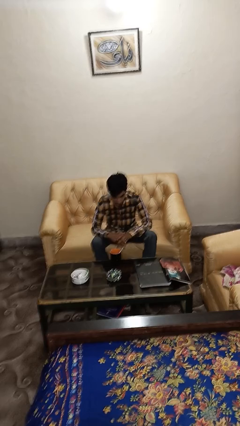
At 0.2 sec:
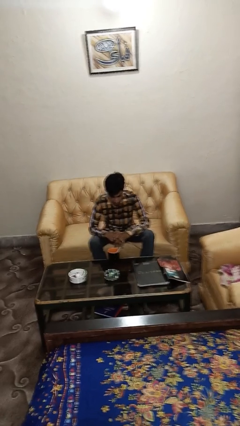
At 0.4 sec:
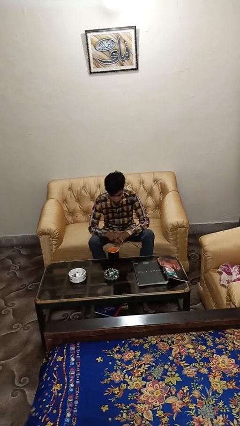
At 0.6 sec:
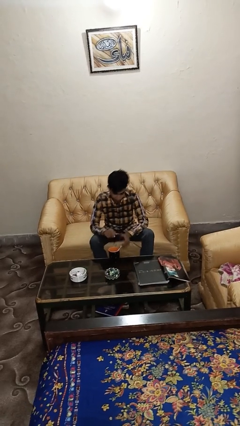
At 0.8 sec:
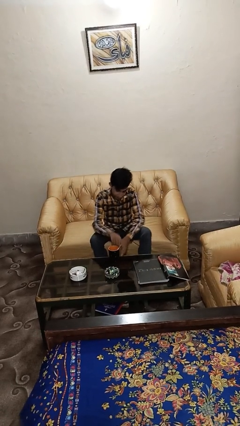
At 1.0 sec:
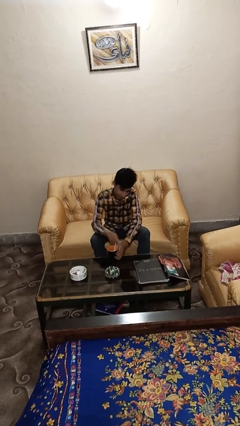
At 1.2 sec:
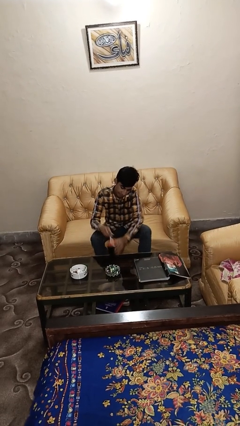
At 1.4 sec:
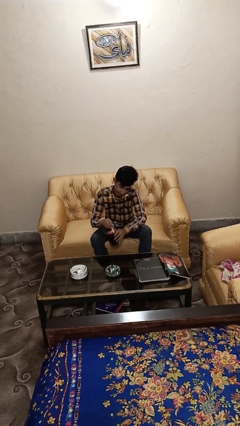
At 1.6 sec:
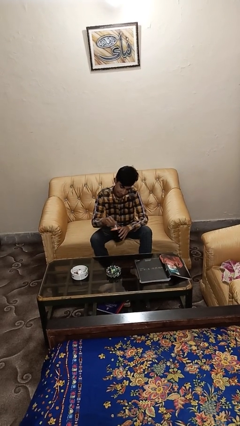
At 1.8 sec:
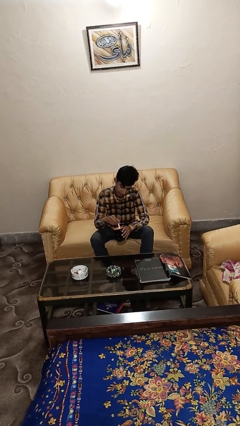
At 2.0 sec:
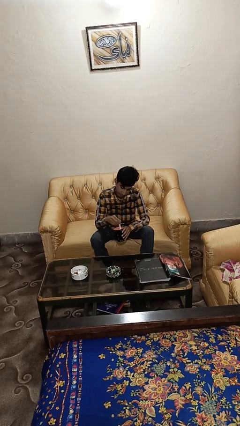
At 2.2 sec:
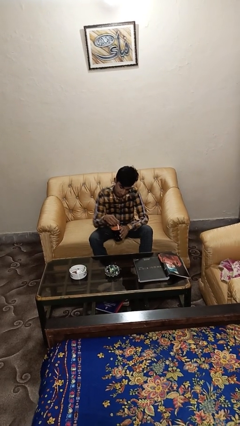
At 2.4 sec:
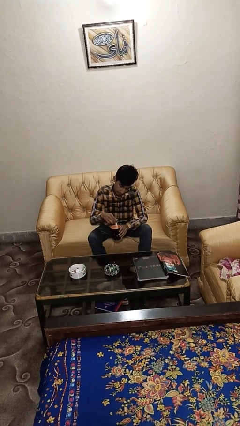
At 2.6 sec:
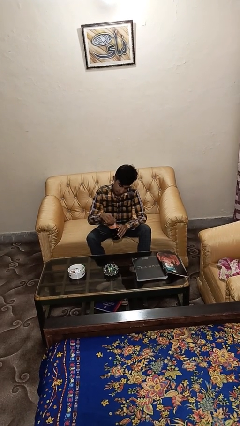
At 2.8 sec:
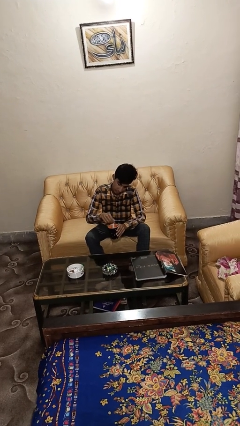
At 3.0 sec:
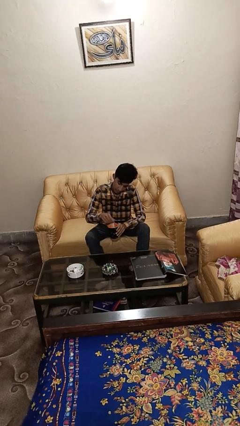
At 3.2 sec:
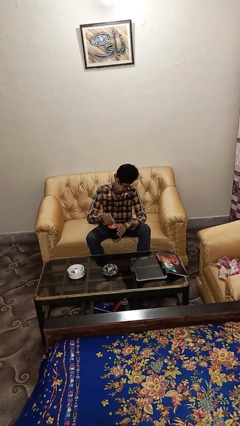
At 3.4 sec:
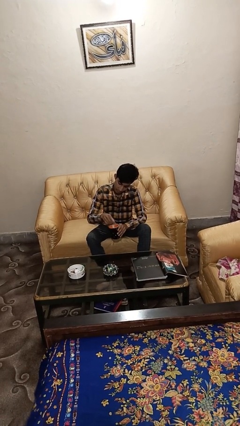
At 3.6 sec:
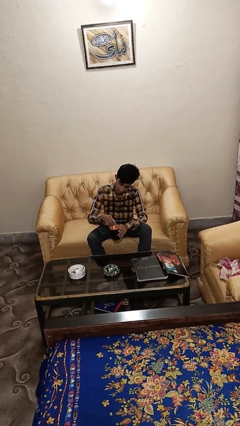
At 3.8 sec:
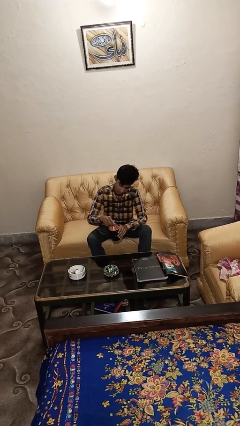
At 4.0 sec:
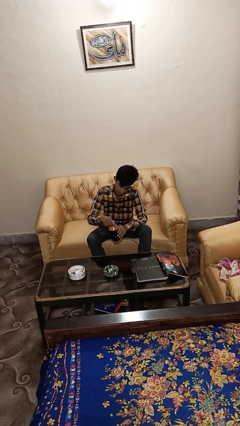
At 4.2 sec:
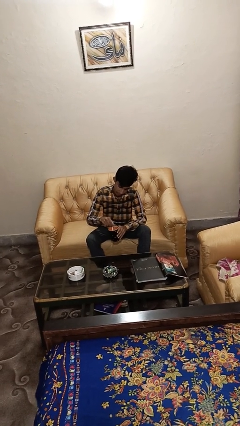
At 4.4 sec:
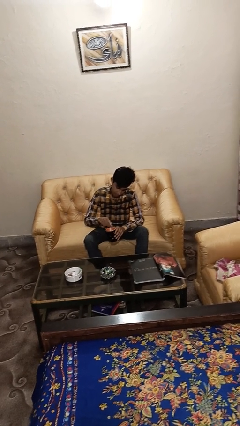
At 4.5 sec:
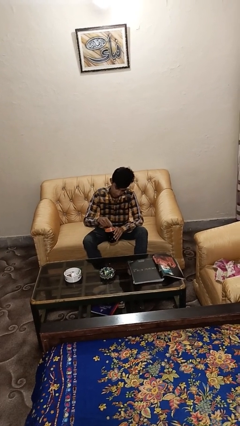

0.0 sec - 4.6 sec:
person stirs mug

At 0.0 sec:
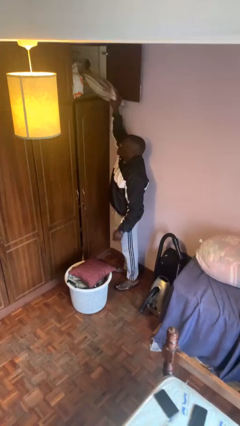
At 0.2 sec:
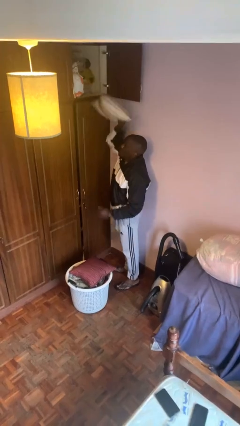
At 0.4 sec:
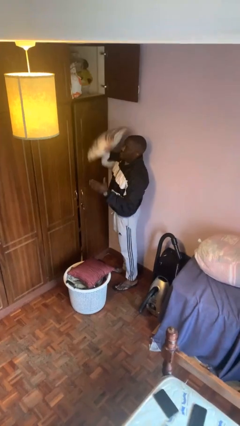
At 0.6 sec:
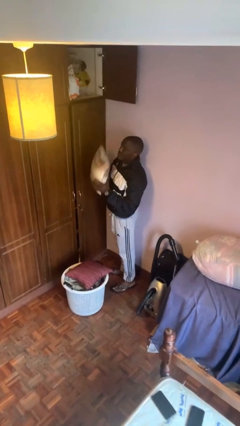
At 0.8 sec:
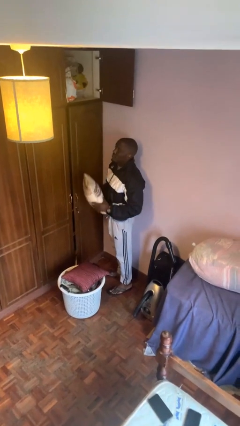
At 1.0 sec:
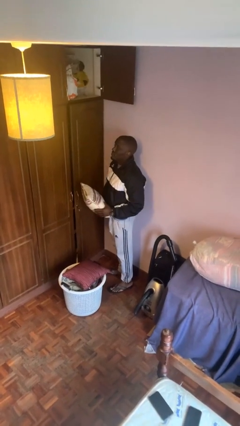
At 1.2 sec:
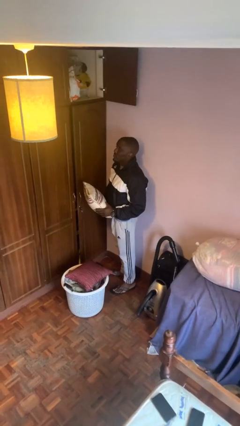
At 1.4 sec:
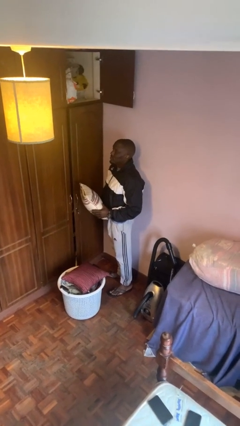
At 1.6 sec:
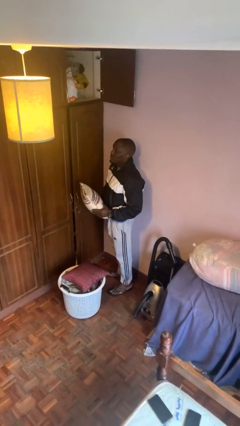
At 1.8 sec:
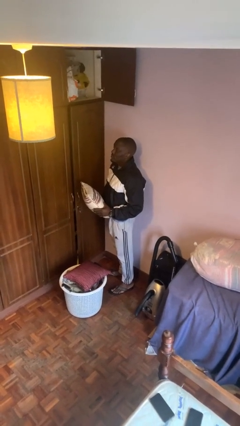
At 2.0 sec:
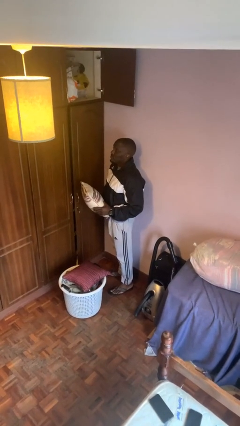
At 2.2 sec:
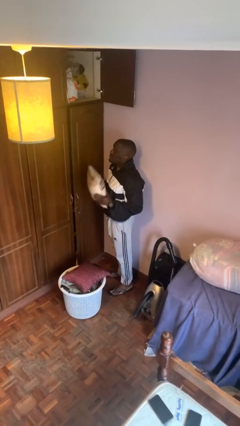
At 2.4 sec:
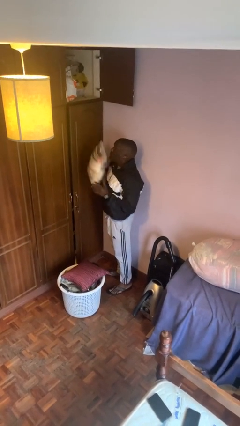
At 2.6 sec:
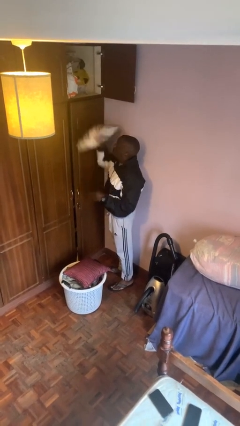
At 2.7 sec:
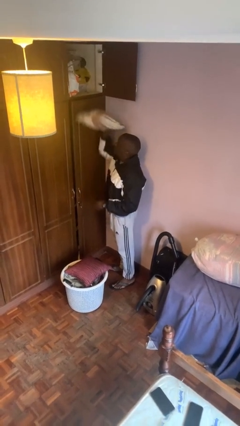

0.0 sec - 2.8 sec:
person picks up object from shelf

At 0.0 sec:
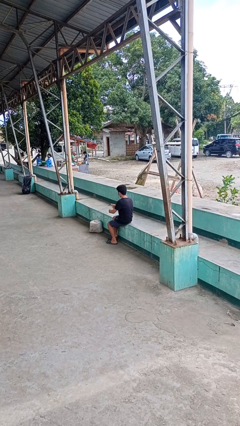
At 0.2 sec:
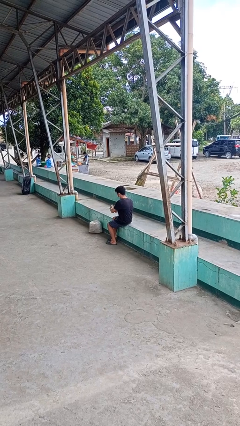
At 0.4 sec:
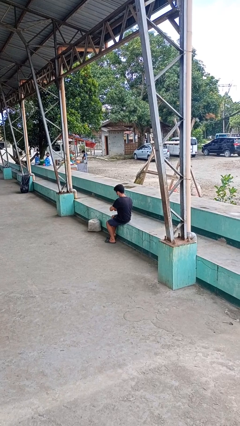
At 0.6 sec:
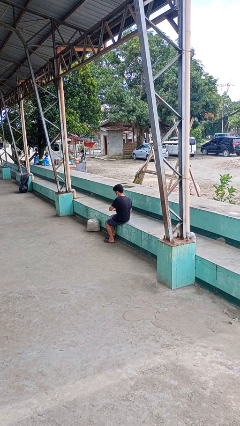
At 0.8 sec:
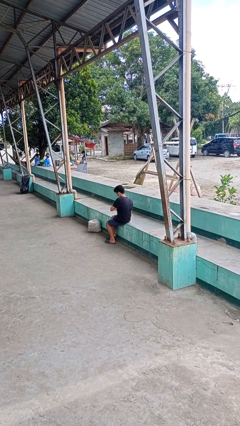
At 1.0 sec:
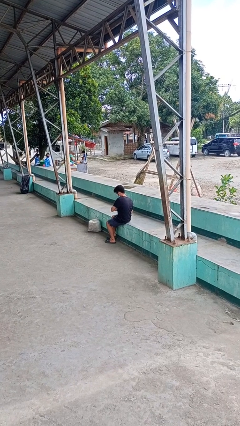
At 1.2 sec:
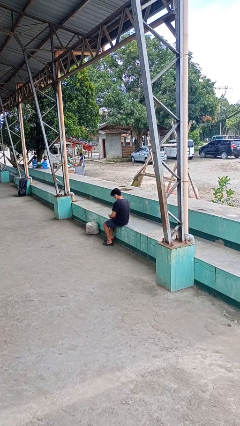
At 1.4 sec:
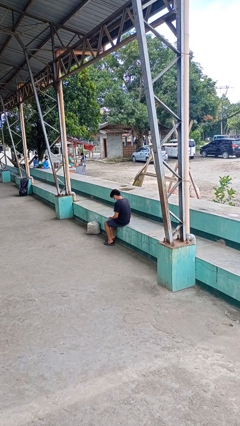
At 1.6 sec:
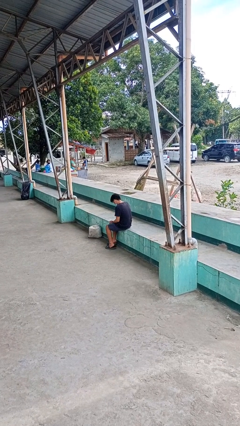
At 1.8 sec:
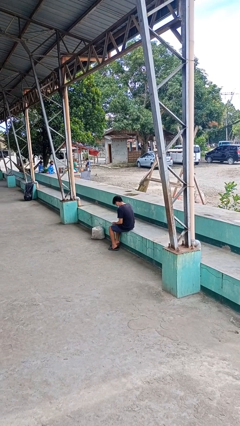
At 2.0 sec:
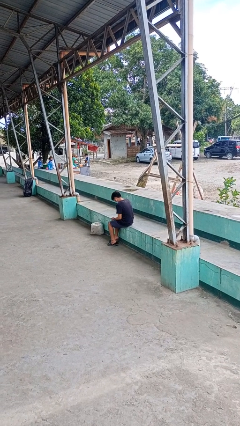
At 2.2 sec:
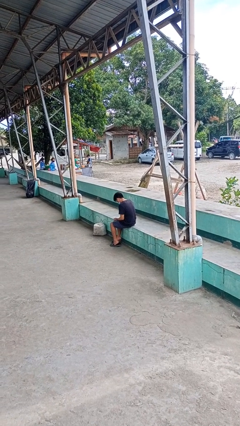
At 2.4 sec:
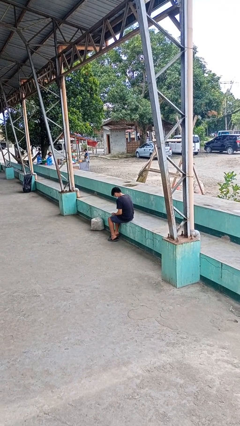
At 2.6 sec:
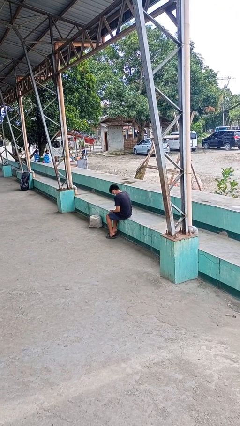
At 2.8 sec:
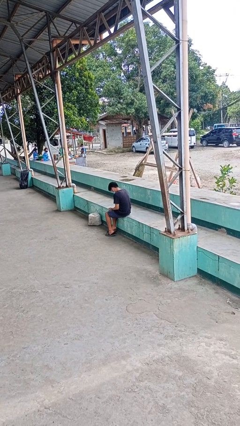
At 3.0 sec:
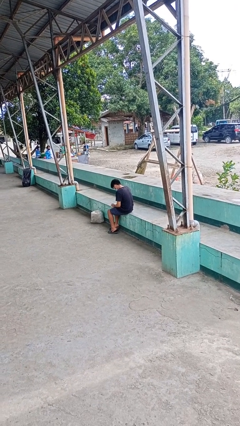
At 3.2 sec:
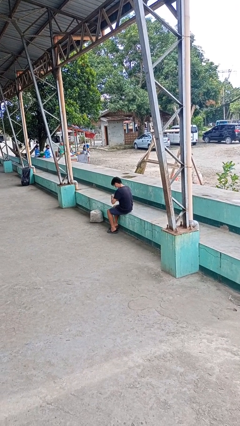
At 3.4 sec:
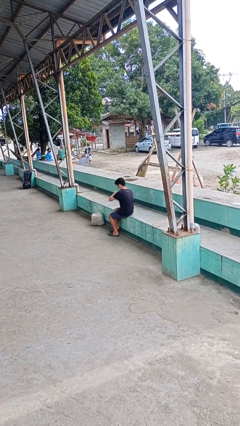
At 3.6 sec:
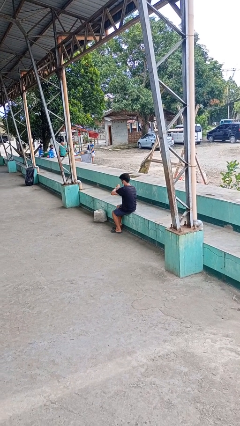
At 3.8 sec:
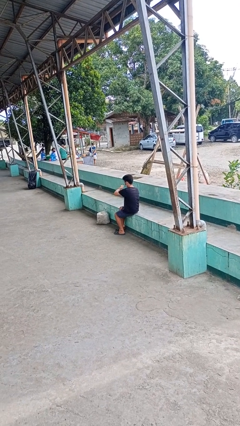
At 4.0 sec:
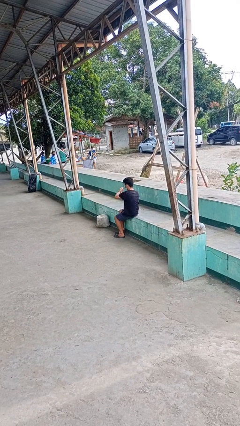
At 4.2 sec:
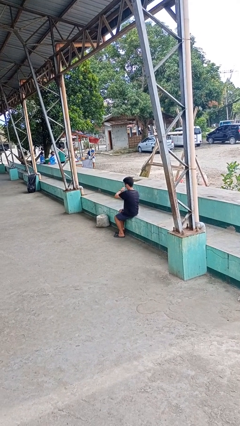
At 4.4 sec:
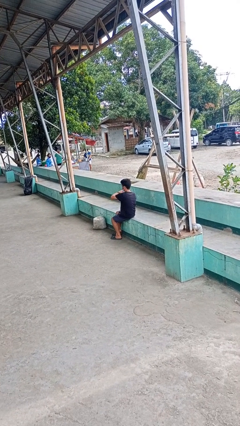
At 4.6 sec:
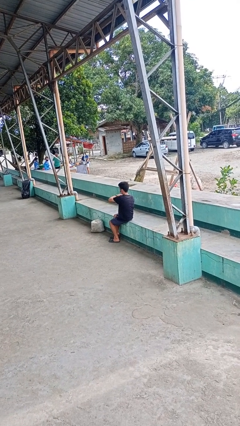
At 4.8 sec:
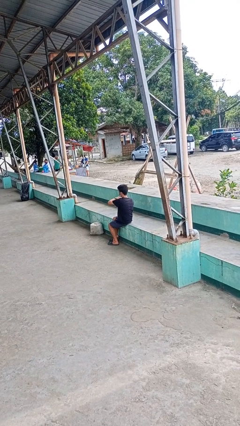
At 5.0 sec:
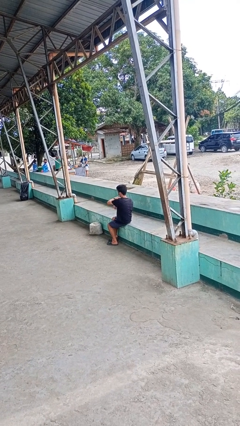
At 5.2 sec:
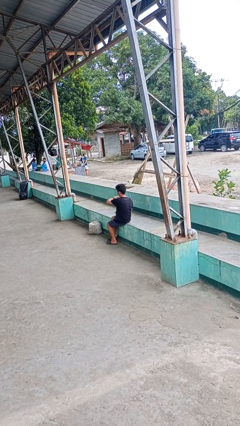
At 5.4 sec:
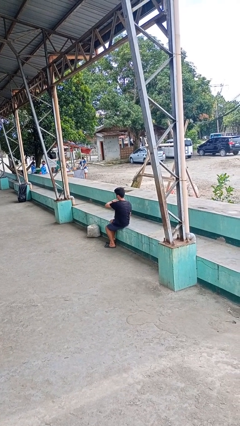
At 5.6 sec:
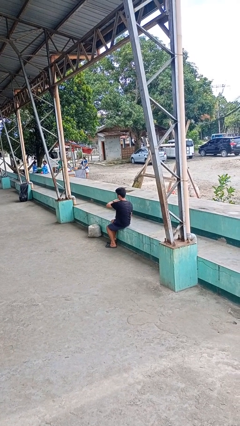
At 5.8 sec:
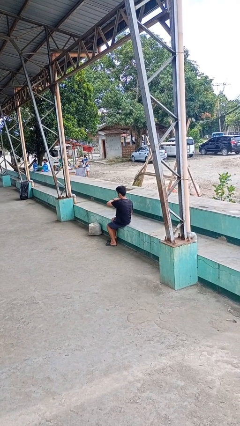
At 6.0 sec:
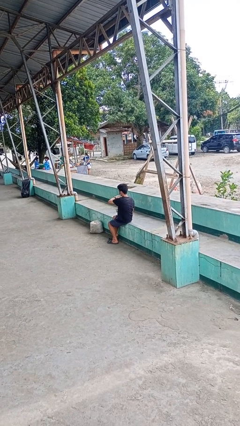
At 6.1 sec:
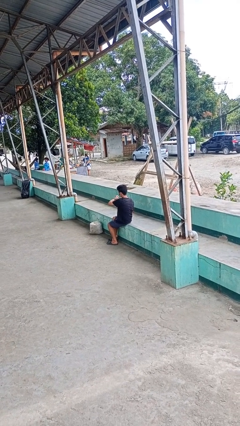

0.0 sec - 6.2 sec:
person puts on wristwatch

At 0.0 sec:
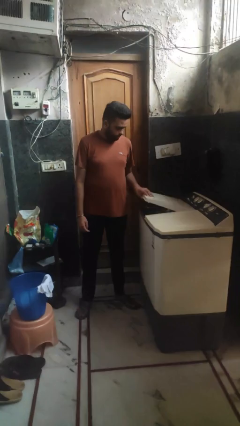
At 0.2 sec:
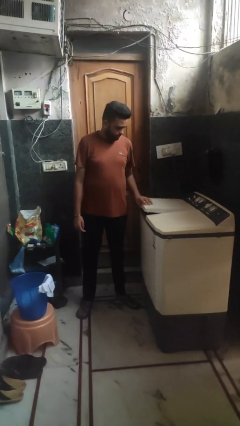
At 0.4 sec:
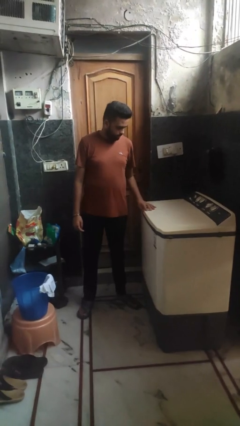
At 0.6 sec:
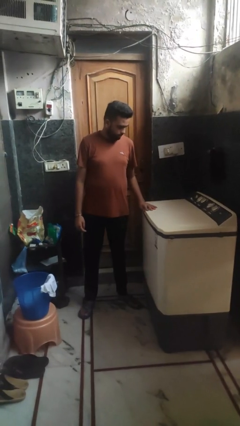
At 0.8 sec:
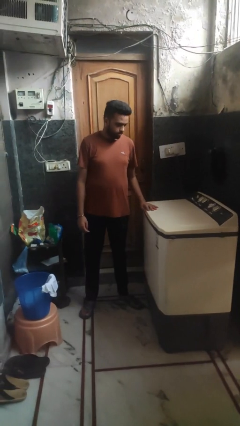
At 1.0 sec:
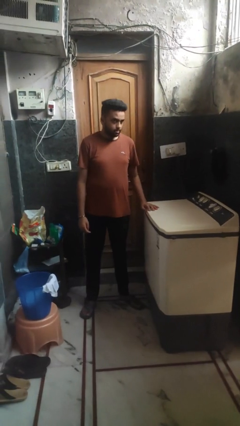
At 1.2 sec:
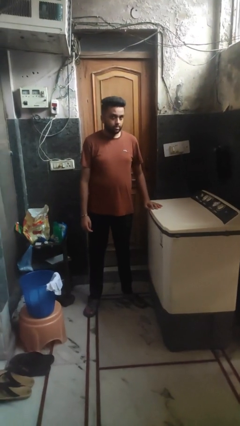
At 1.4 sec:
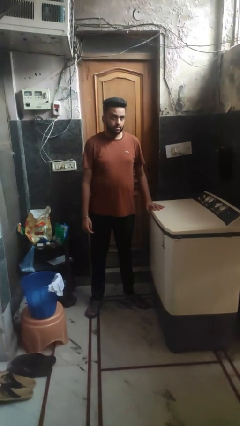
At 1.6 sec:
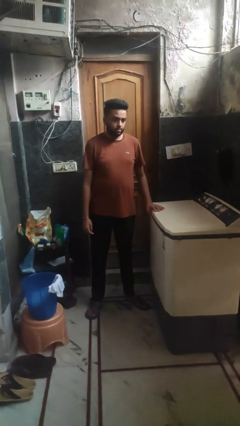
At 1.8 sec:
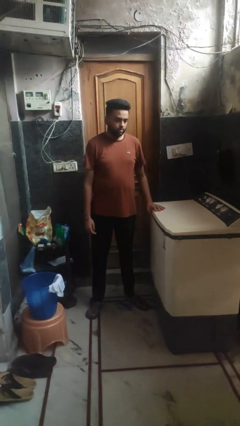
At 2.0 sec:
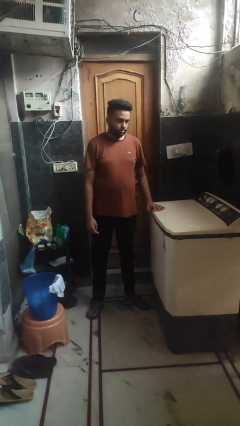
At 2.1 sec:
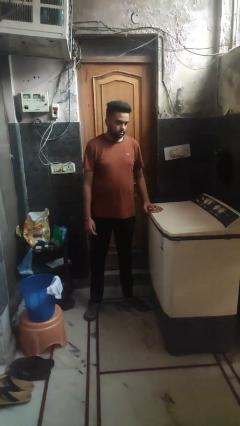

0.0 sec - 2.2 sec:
person closes clothes washer

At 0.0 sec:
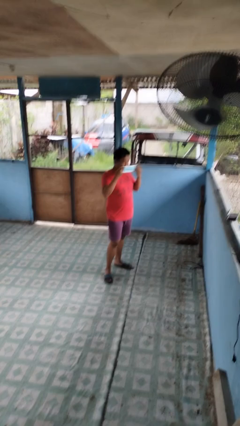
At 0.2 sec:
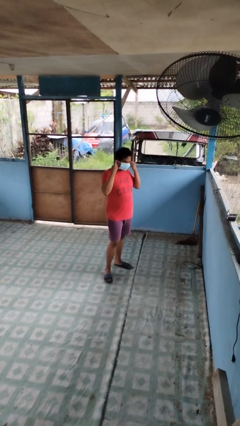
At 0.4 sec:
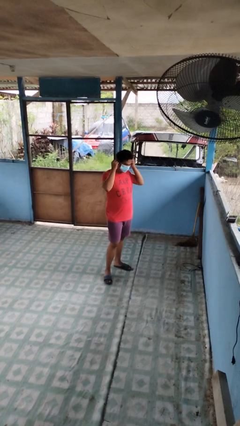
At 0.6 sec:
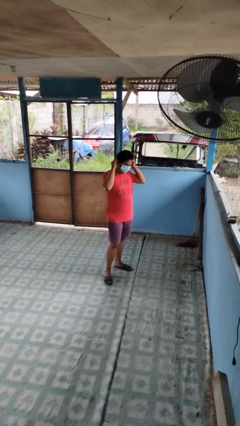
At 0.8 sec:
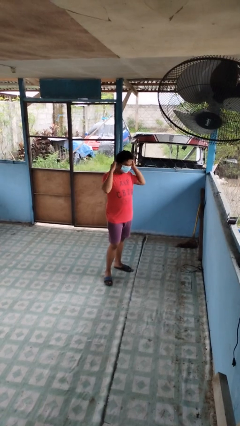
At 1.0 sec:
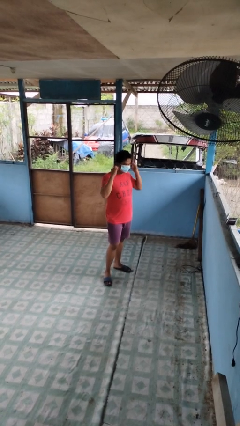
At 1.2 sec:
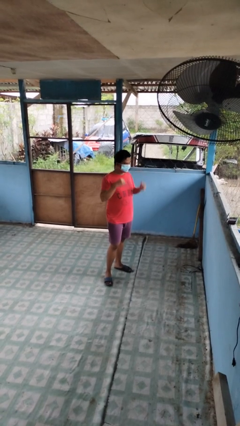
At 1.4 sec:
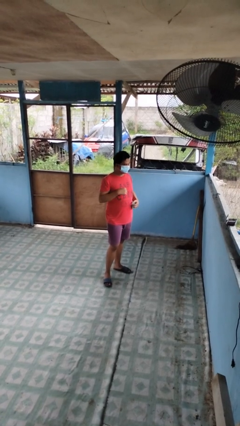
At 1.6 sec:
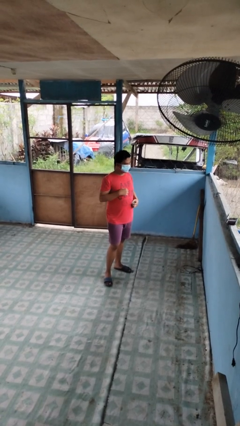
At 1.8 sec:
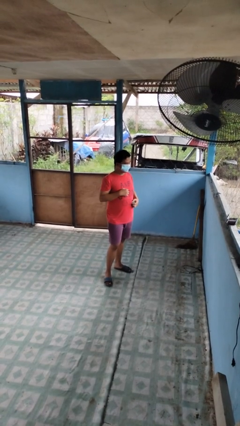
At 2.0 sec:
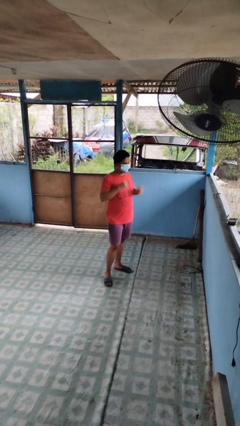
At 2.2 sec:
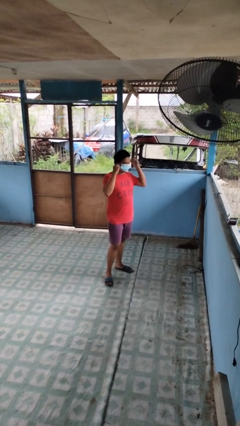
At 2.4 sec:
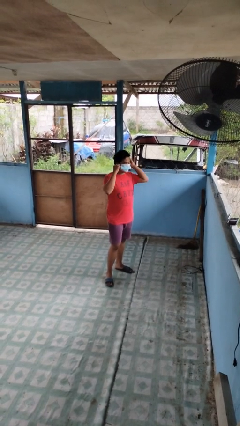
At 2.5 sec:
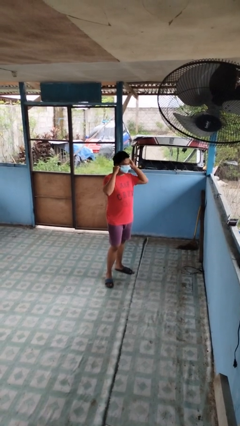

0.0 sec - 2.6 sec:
person puts on facemask
